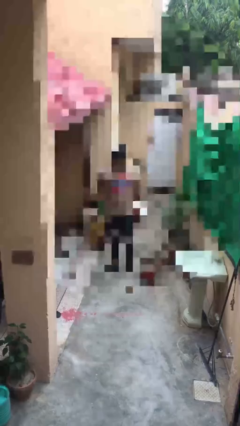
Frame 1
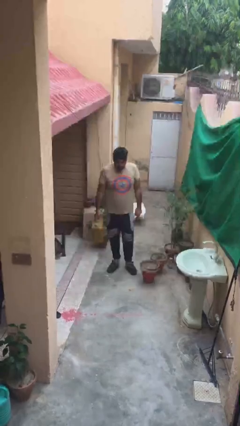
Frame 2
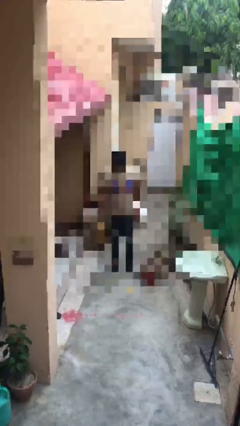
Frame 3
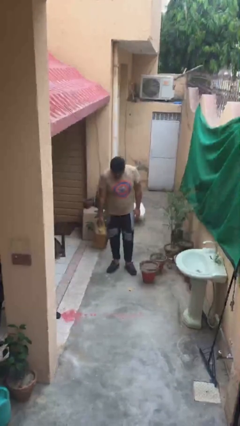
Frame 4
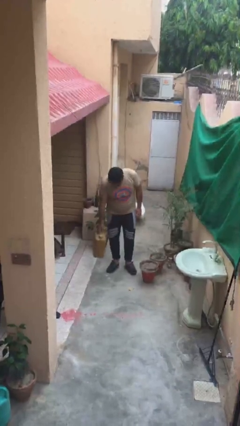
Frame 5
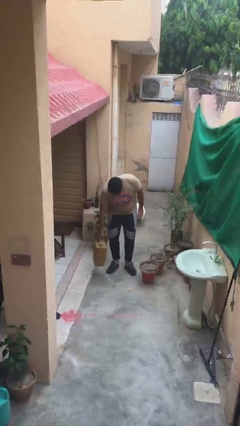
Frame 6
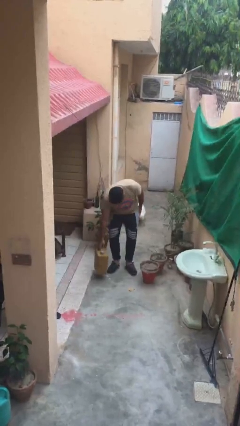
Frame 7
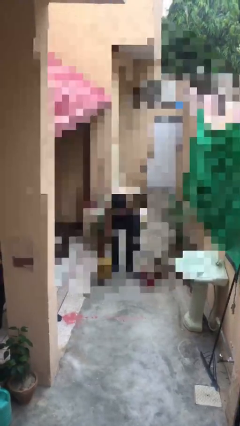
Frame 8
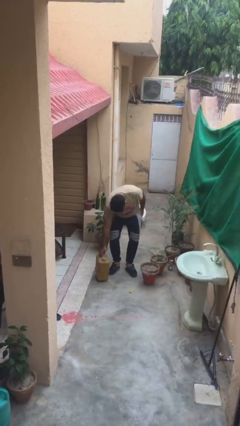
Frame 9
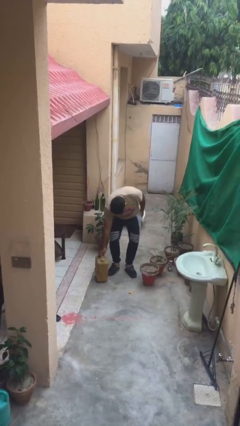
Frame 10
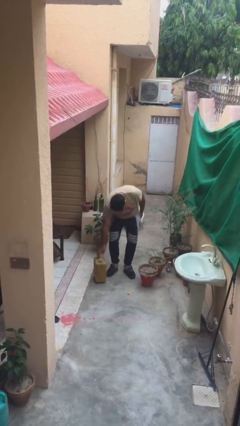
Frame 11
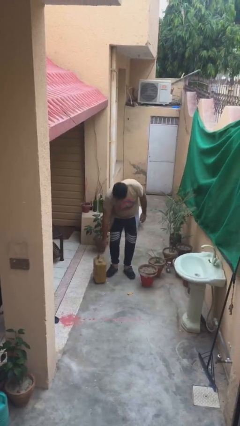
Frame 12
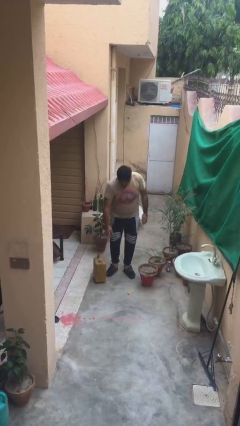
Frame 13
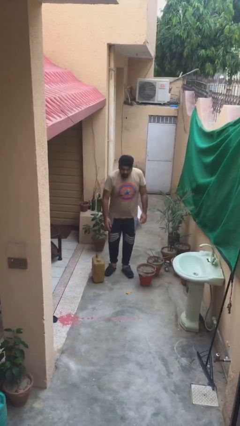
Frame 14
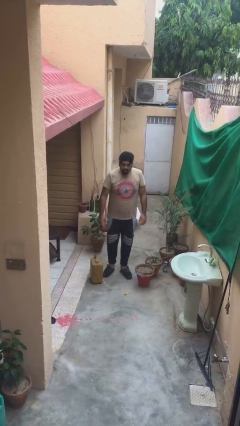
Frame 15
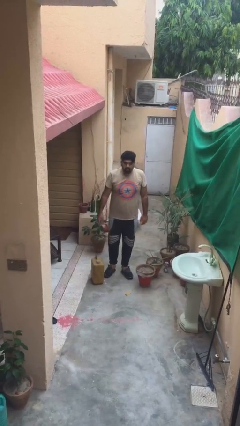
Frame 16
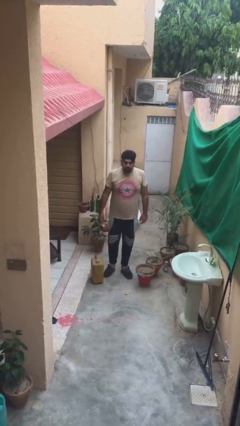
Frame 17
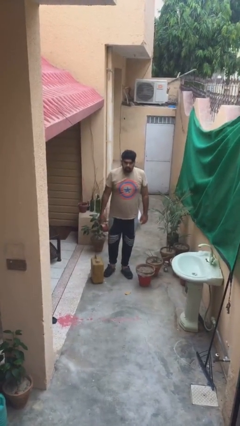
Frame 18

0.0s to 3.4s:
person puts down object on floor

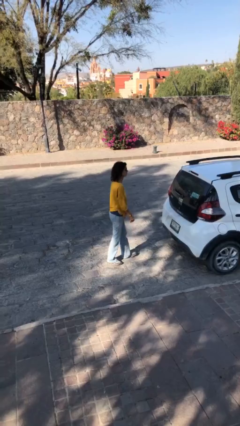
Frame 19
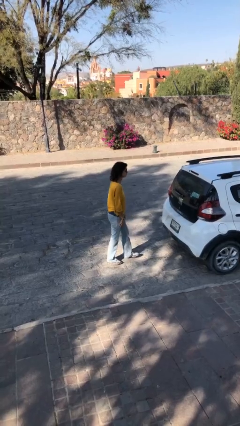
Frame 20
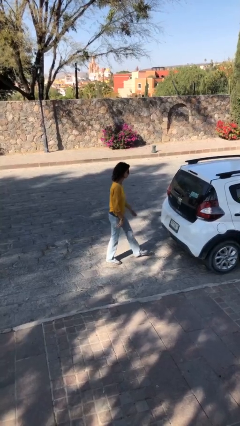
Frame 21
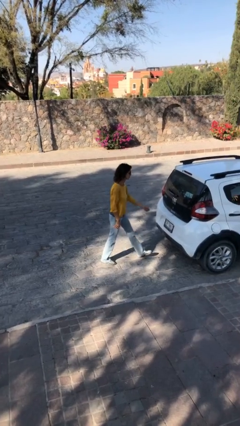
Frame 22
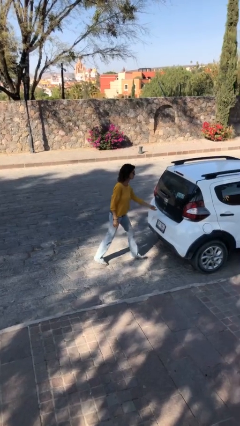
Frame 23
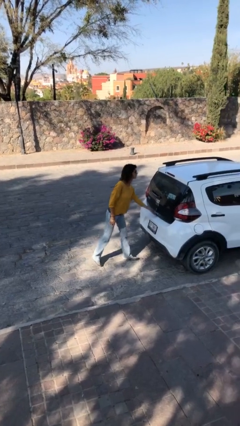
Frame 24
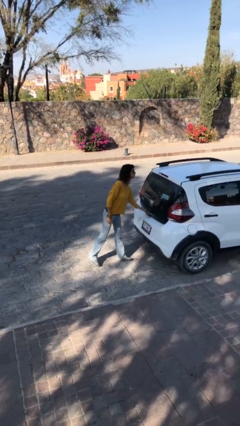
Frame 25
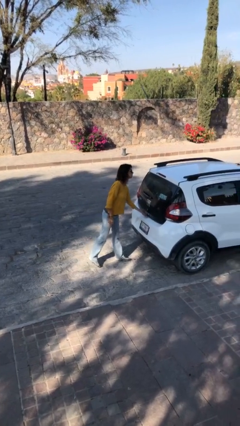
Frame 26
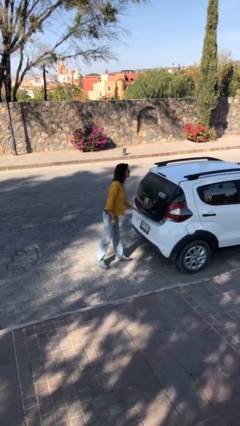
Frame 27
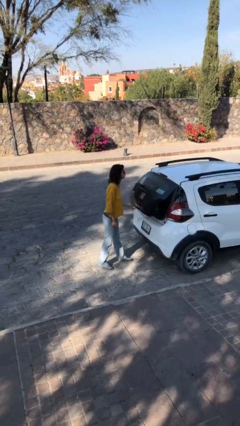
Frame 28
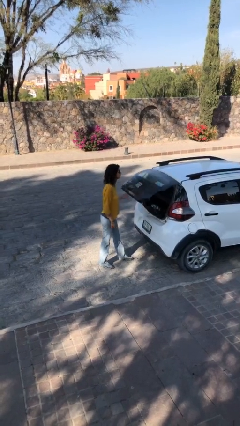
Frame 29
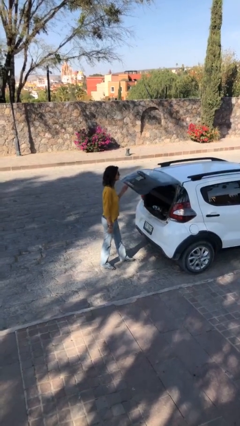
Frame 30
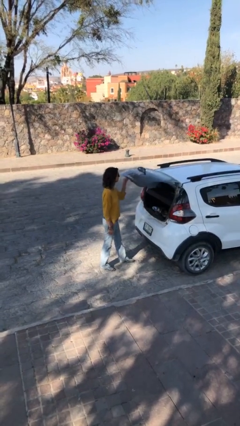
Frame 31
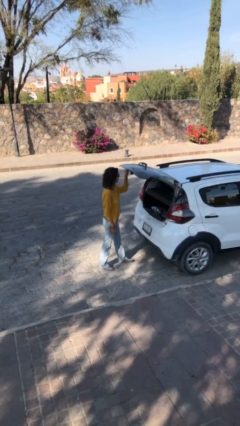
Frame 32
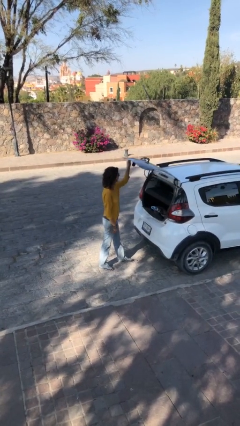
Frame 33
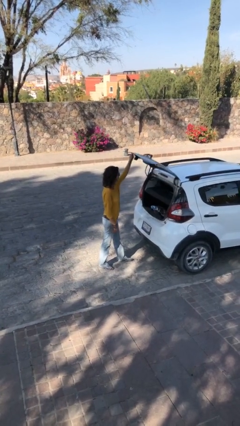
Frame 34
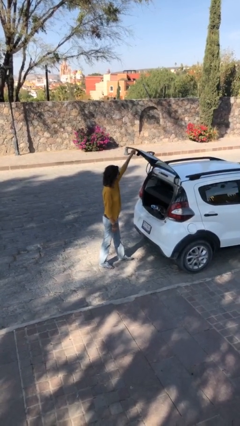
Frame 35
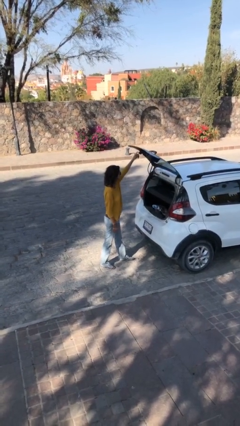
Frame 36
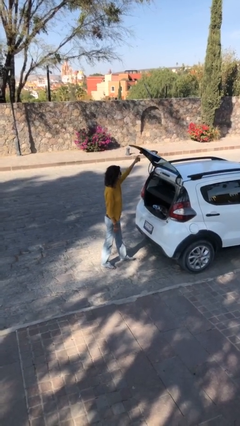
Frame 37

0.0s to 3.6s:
person opens car trunk

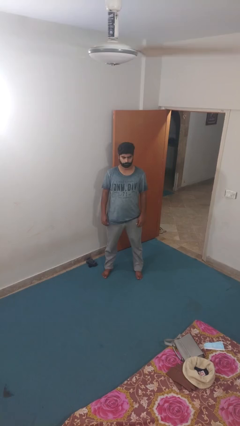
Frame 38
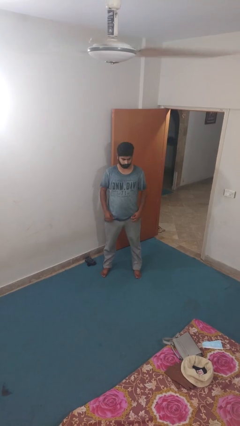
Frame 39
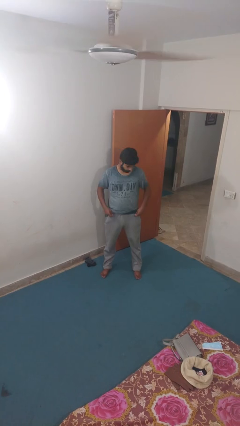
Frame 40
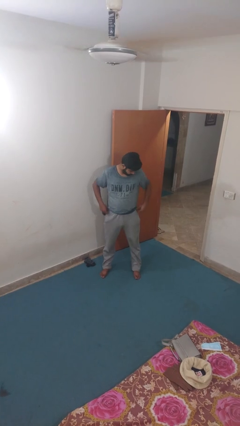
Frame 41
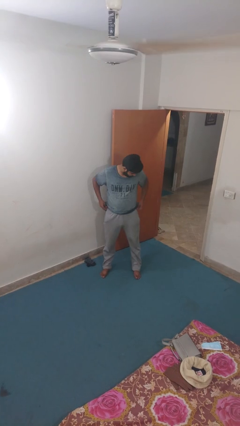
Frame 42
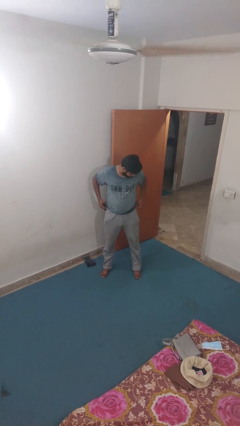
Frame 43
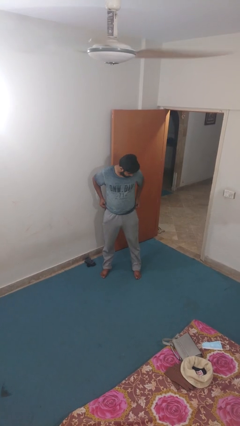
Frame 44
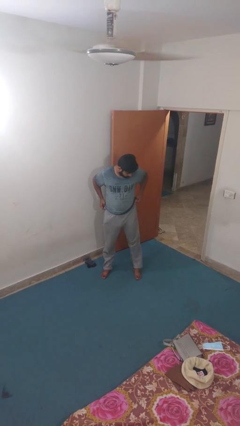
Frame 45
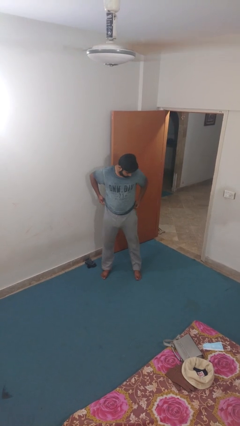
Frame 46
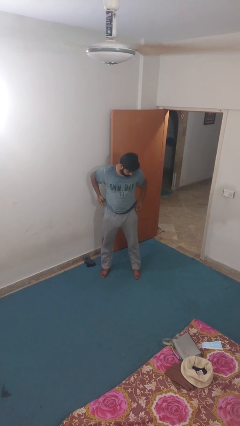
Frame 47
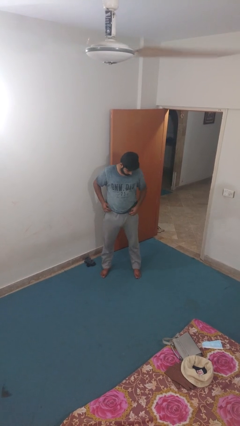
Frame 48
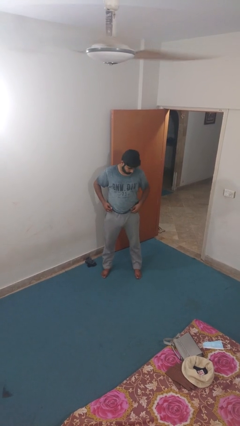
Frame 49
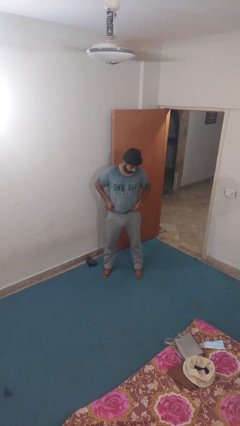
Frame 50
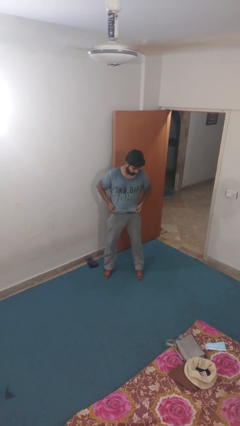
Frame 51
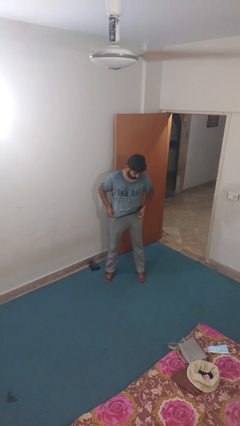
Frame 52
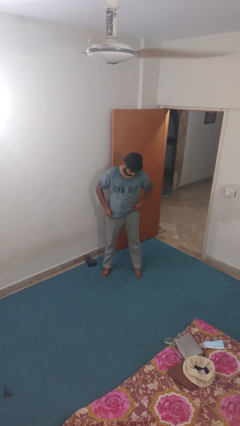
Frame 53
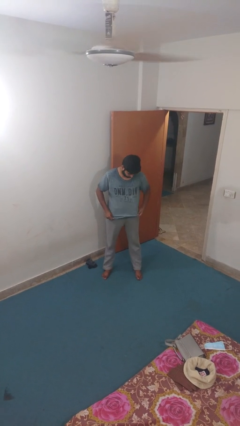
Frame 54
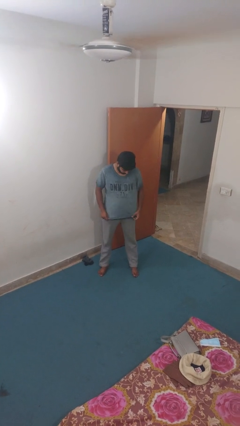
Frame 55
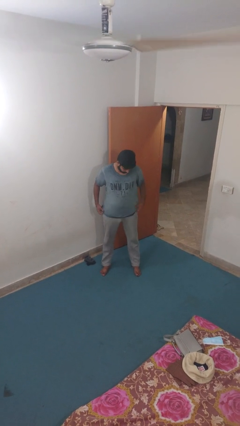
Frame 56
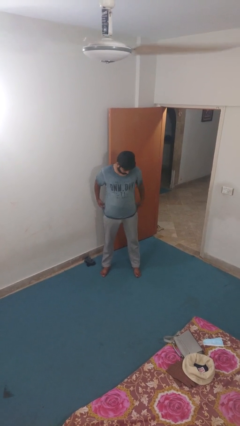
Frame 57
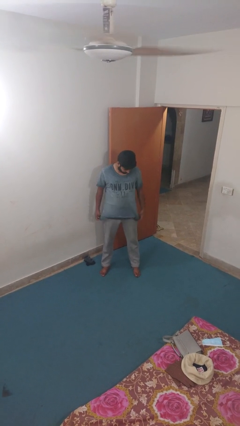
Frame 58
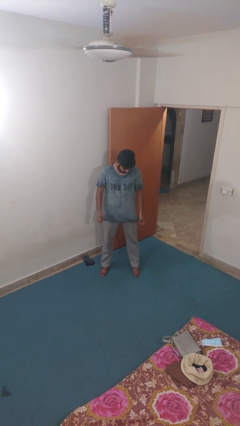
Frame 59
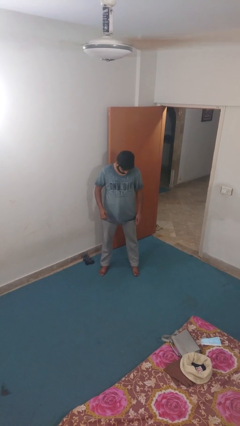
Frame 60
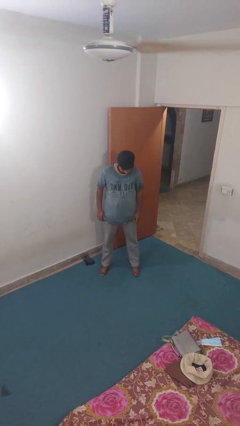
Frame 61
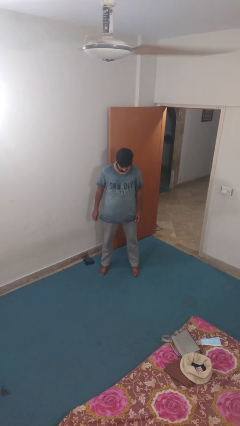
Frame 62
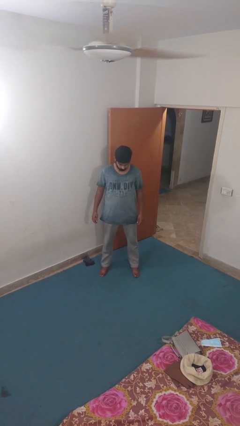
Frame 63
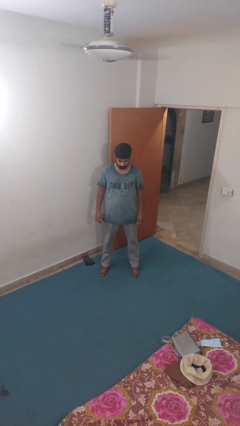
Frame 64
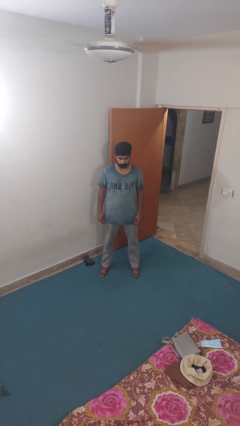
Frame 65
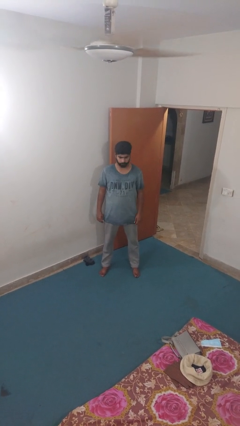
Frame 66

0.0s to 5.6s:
person hikes up pants

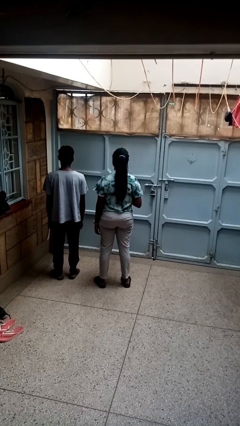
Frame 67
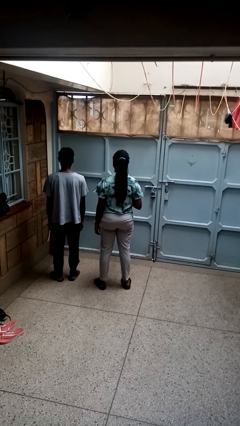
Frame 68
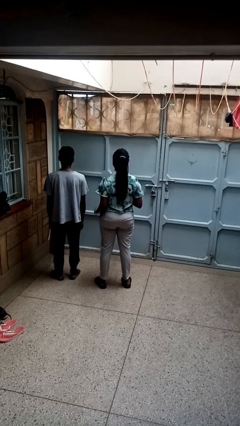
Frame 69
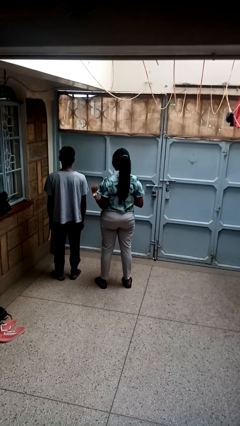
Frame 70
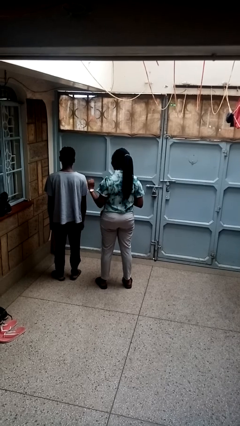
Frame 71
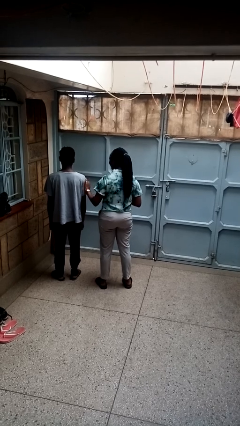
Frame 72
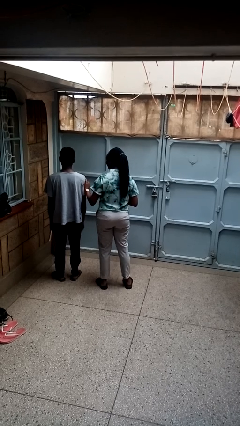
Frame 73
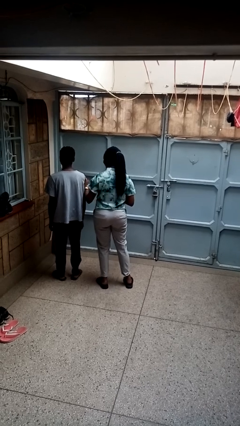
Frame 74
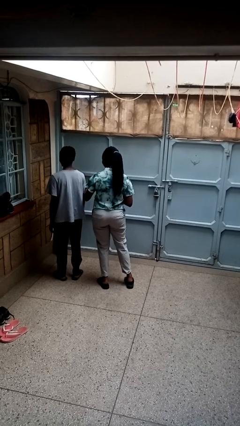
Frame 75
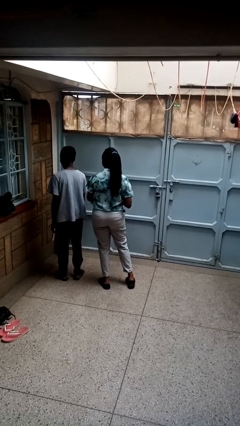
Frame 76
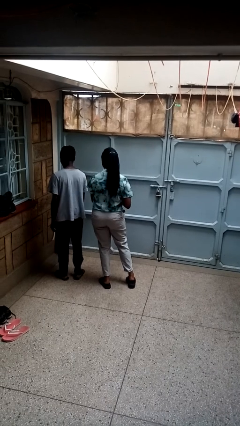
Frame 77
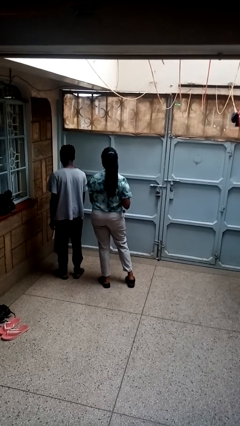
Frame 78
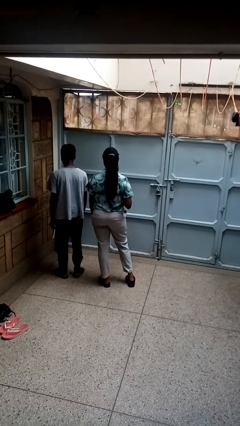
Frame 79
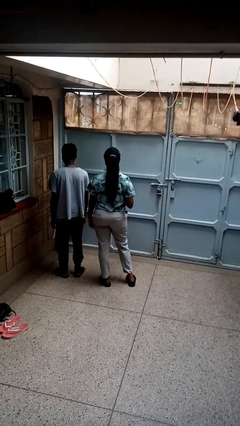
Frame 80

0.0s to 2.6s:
person shoves person

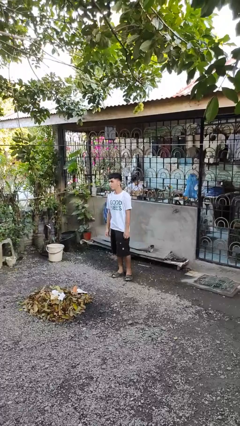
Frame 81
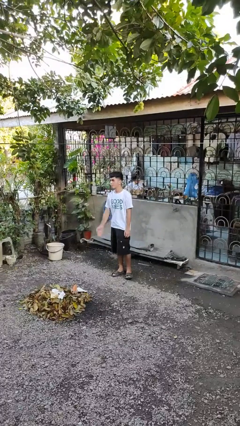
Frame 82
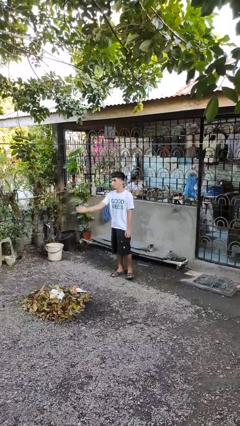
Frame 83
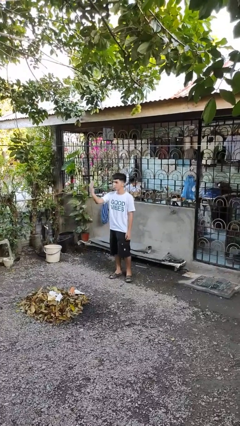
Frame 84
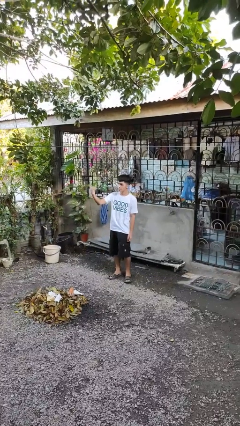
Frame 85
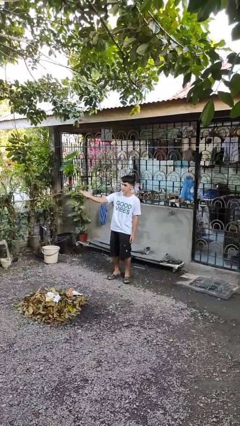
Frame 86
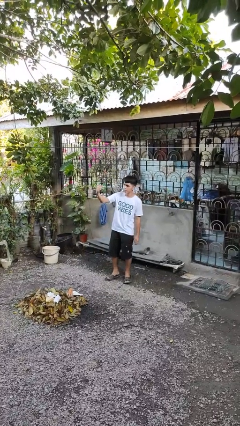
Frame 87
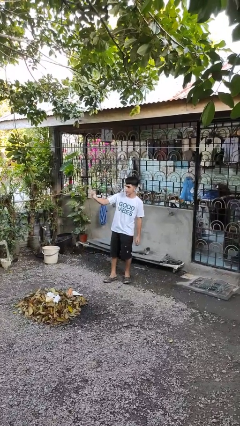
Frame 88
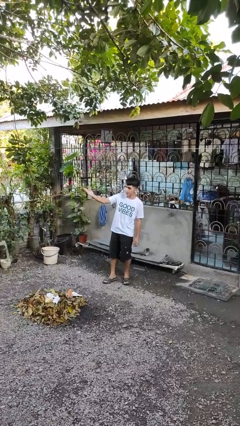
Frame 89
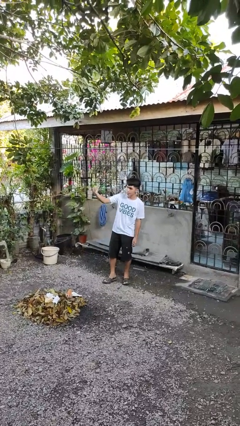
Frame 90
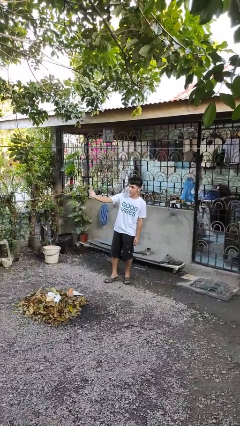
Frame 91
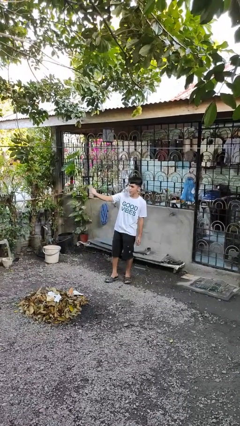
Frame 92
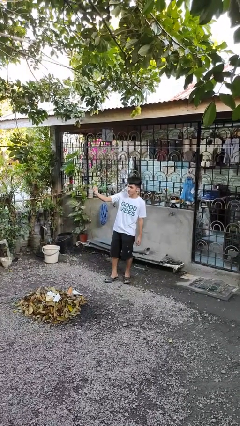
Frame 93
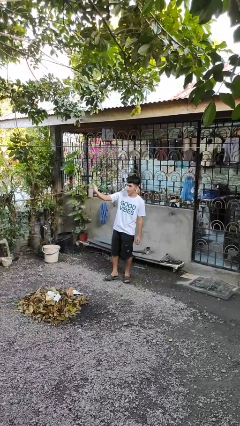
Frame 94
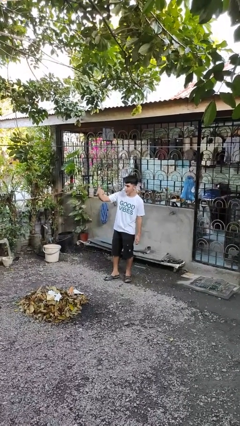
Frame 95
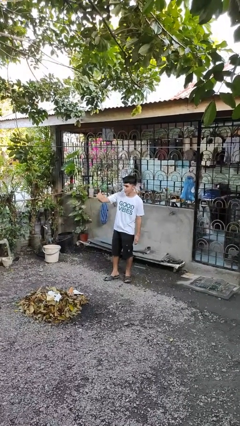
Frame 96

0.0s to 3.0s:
person gestures come here
